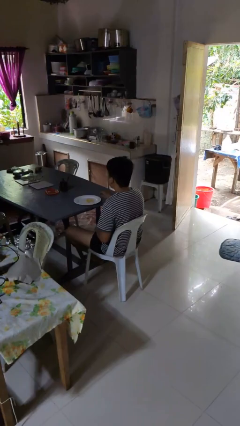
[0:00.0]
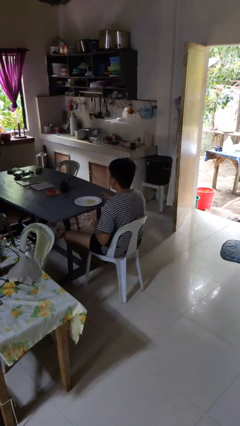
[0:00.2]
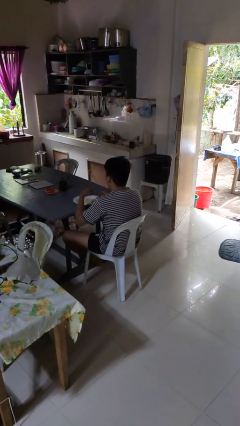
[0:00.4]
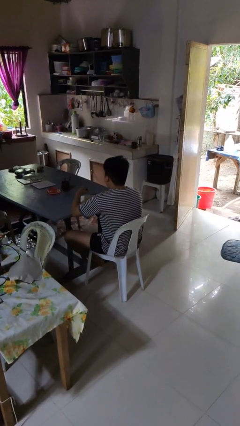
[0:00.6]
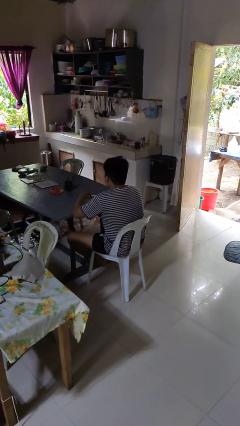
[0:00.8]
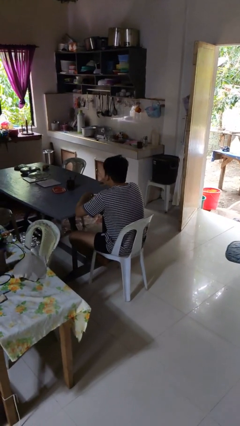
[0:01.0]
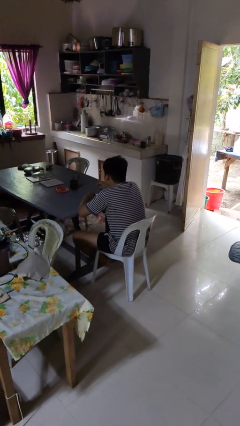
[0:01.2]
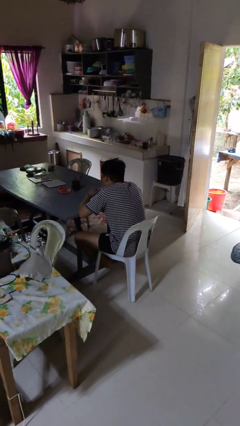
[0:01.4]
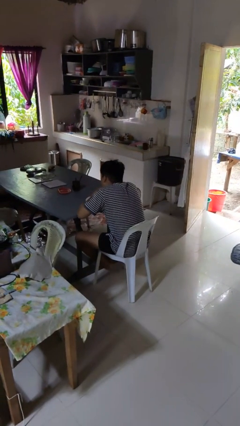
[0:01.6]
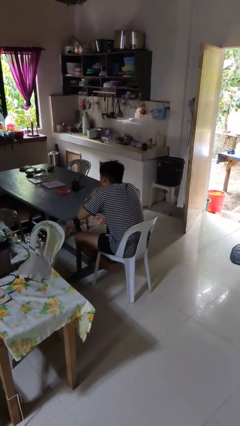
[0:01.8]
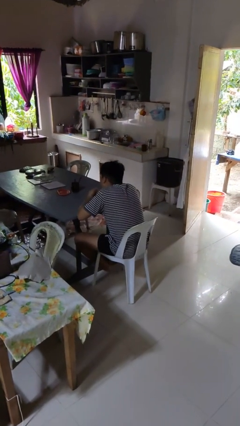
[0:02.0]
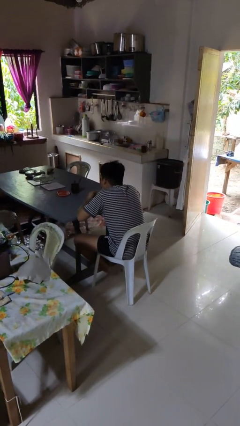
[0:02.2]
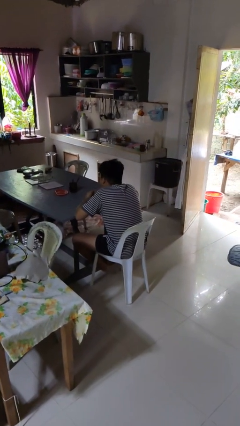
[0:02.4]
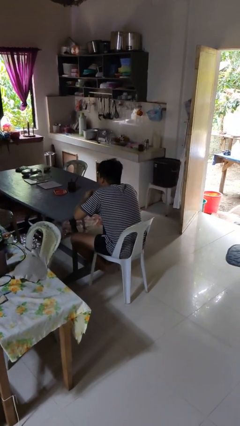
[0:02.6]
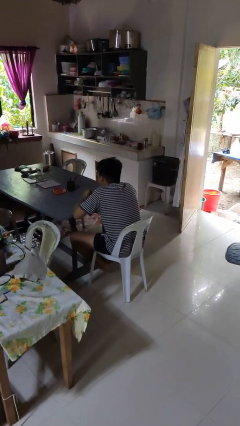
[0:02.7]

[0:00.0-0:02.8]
person eats with hands

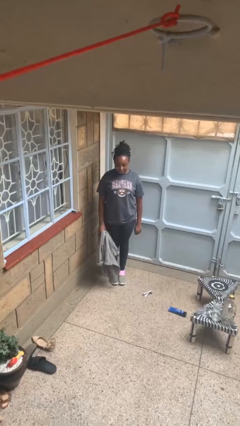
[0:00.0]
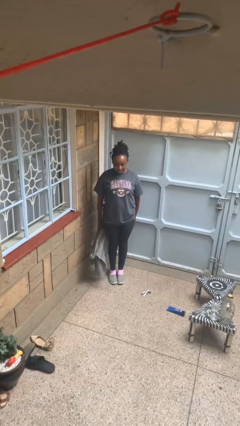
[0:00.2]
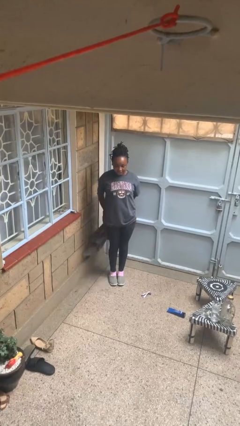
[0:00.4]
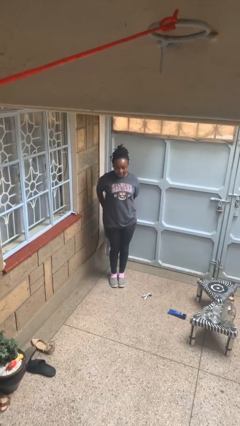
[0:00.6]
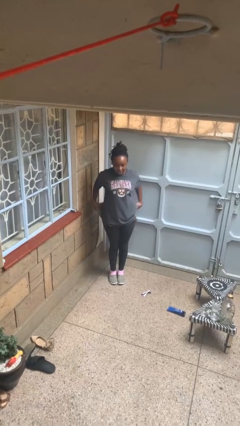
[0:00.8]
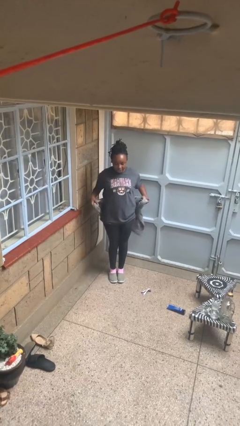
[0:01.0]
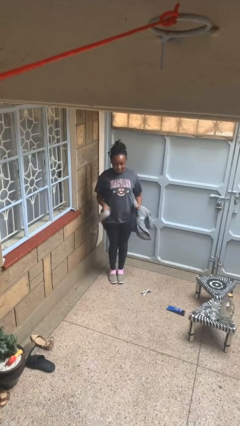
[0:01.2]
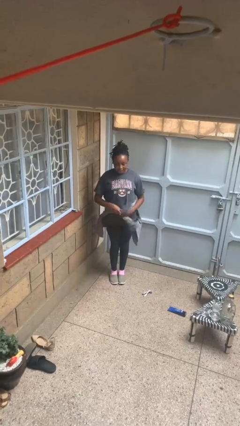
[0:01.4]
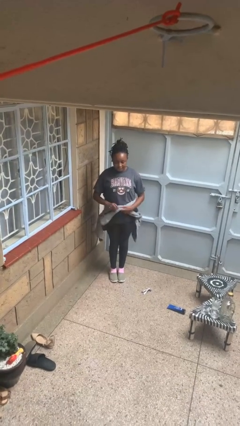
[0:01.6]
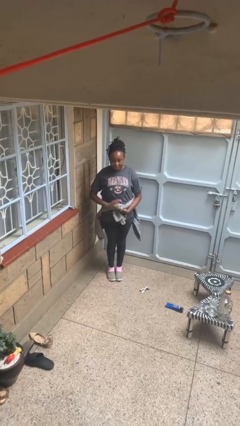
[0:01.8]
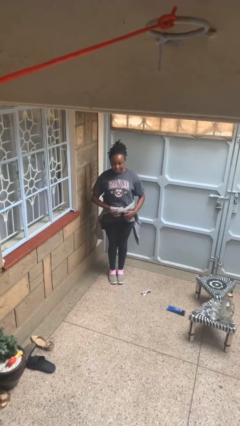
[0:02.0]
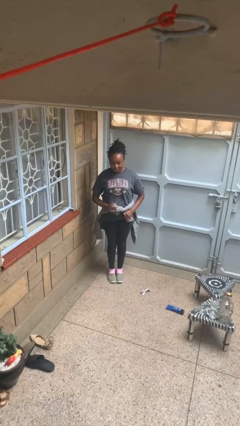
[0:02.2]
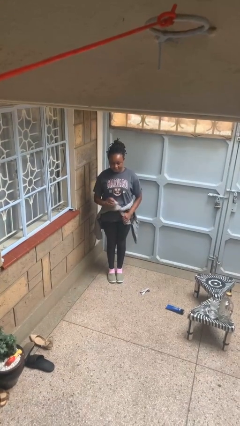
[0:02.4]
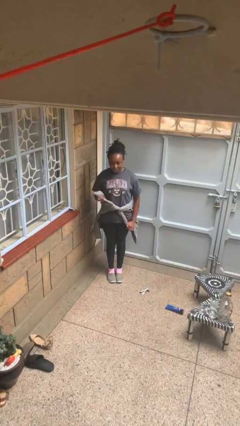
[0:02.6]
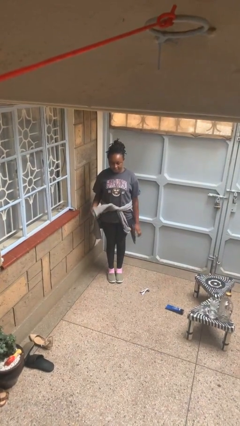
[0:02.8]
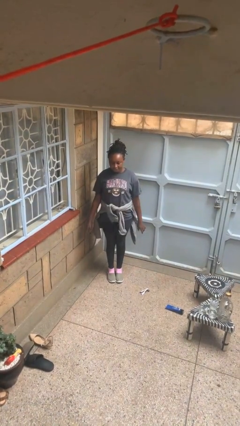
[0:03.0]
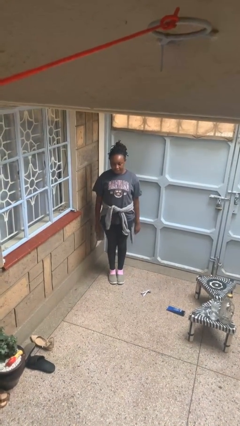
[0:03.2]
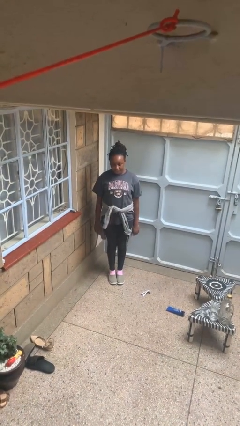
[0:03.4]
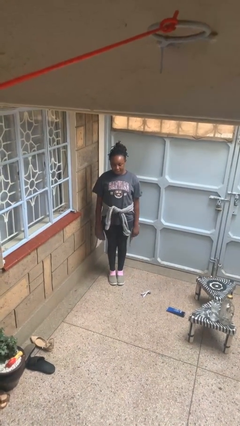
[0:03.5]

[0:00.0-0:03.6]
person ties jacket around waist

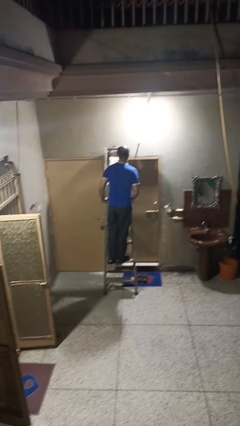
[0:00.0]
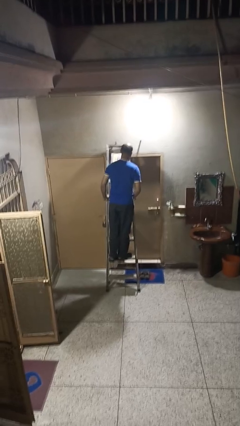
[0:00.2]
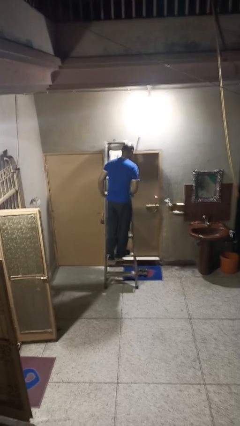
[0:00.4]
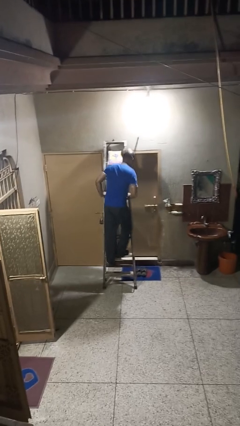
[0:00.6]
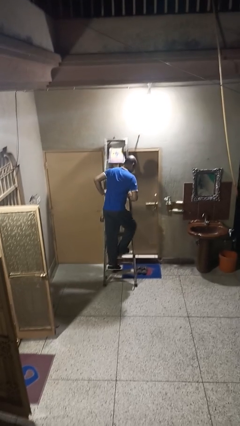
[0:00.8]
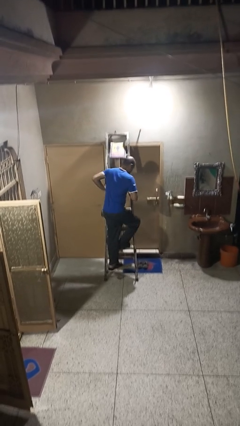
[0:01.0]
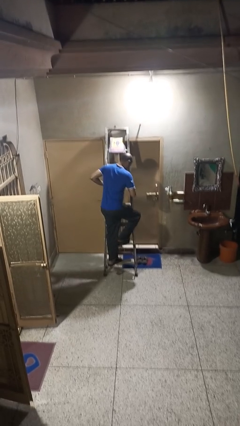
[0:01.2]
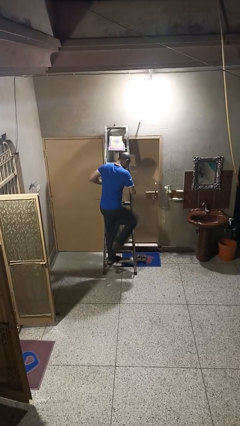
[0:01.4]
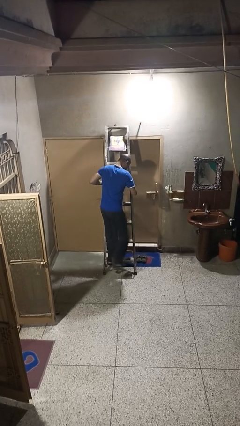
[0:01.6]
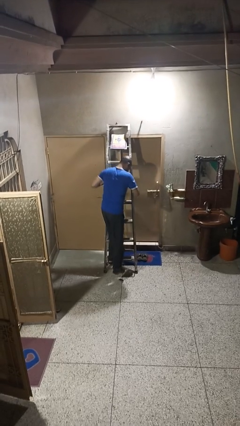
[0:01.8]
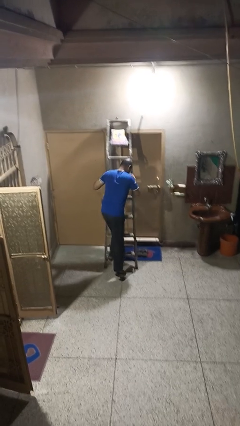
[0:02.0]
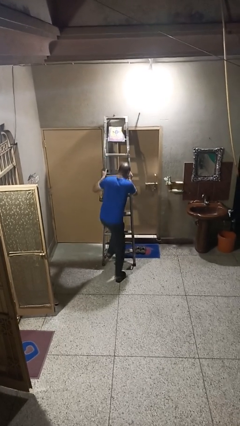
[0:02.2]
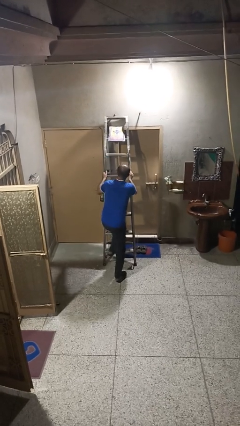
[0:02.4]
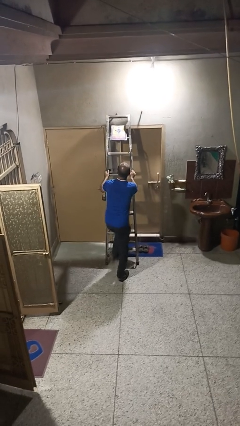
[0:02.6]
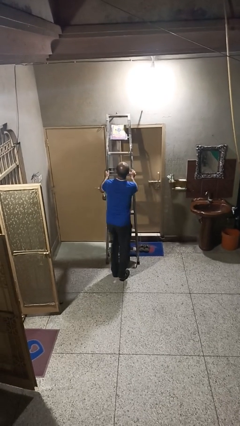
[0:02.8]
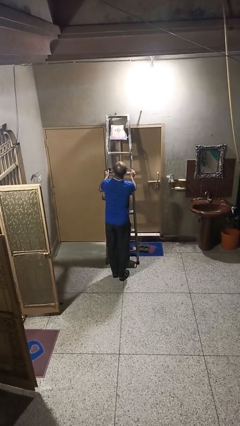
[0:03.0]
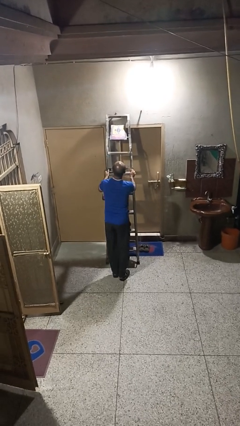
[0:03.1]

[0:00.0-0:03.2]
person climbs down ladder

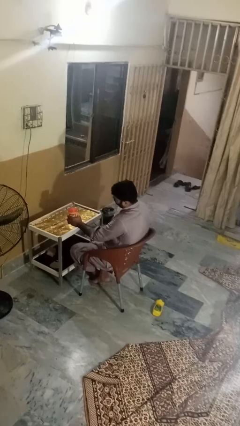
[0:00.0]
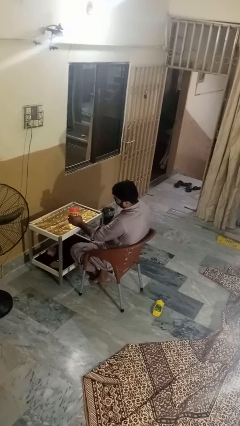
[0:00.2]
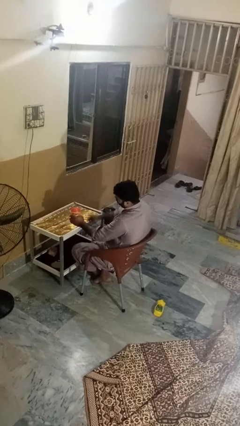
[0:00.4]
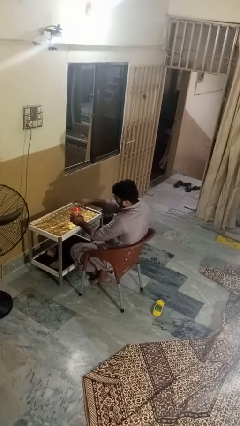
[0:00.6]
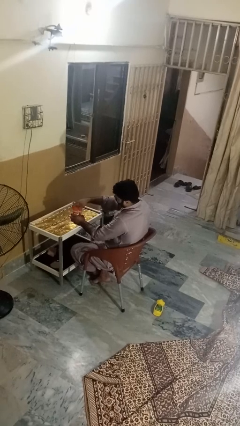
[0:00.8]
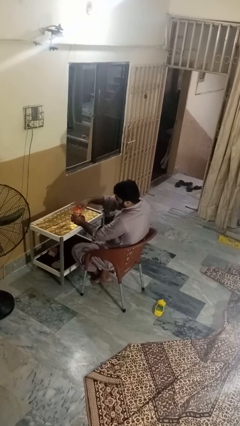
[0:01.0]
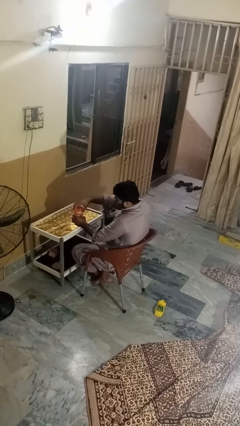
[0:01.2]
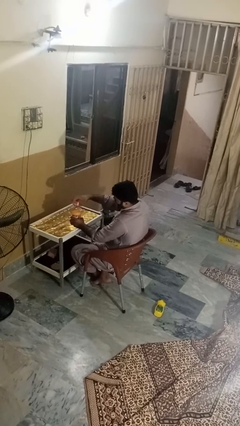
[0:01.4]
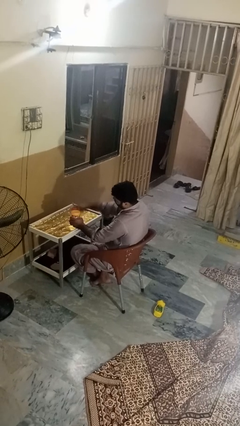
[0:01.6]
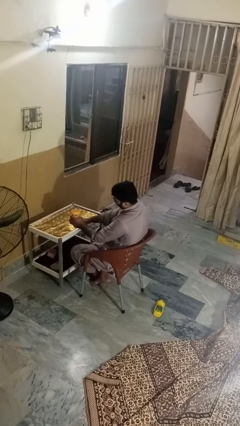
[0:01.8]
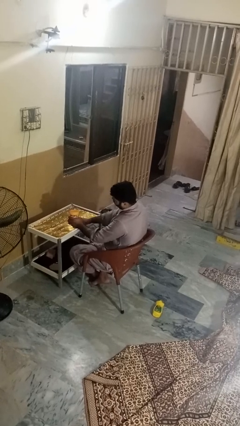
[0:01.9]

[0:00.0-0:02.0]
person opens jar

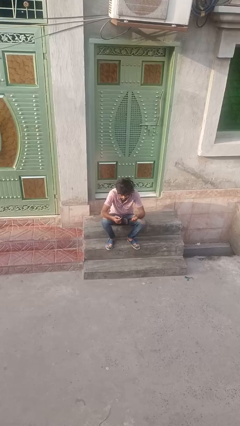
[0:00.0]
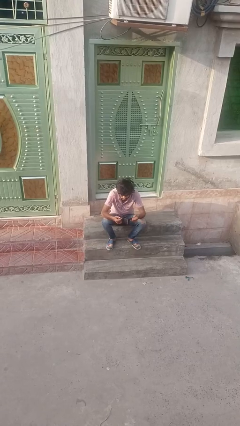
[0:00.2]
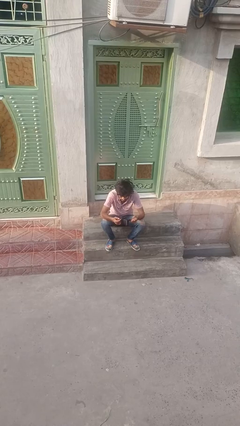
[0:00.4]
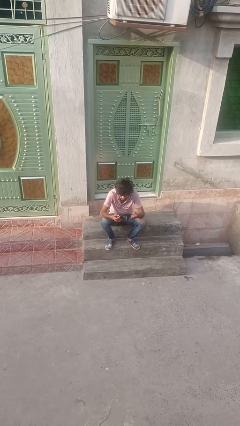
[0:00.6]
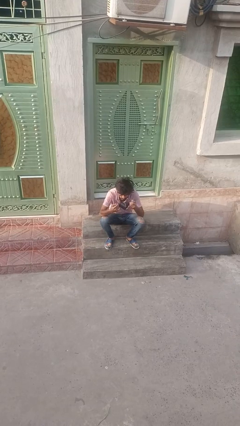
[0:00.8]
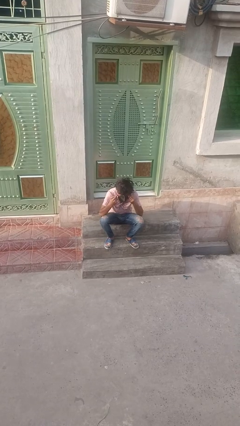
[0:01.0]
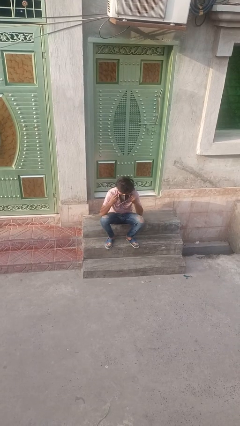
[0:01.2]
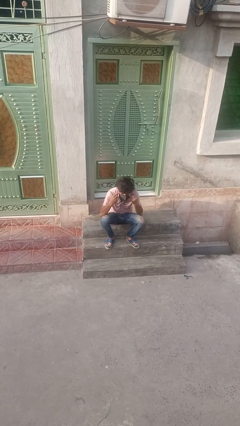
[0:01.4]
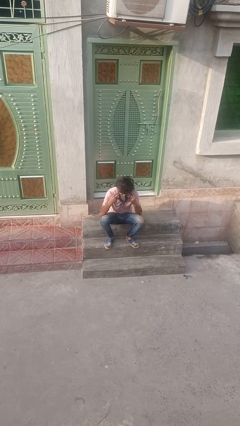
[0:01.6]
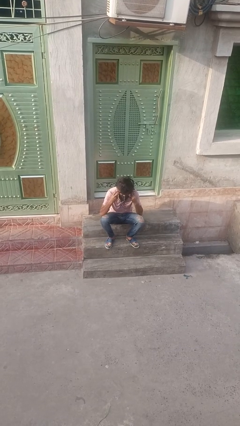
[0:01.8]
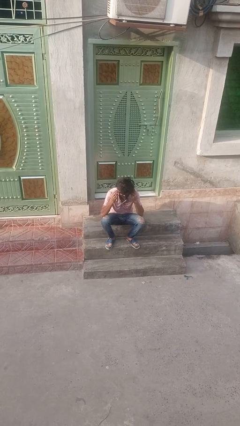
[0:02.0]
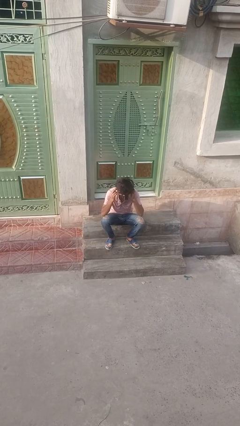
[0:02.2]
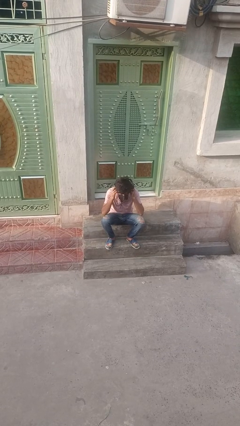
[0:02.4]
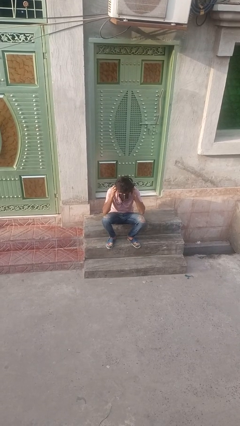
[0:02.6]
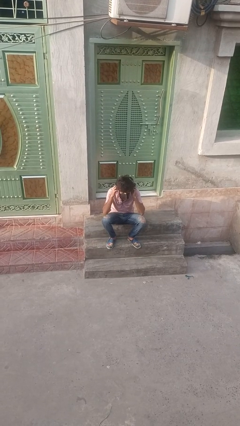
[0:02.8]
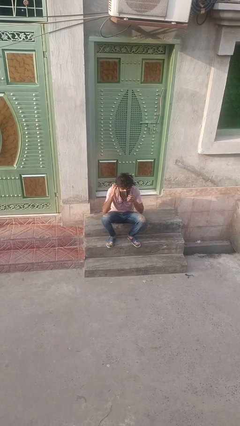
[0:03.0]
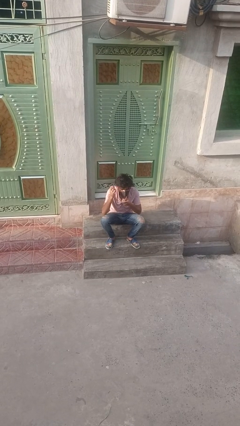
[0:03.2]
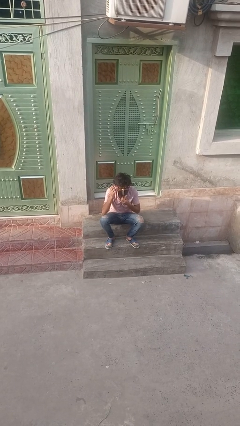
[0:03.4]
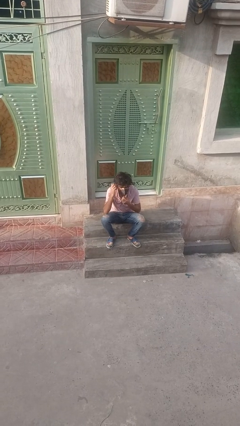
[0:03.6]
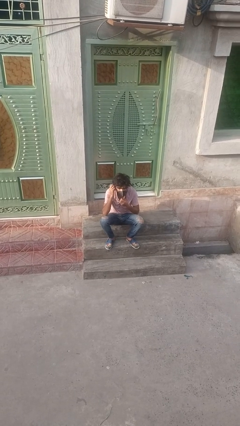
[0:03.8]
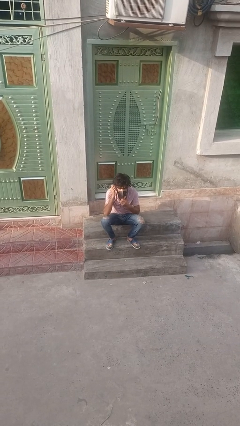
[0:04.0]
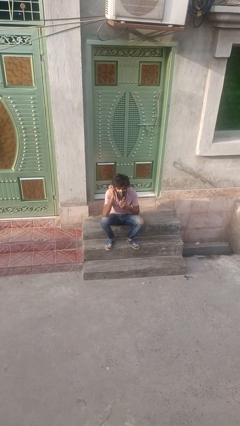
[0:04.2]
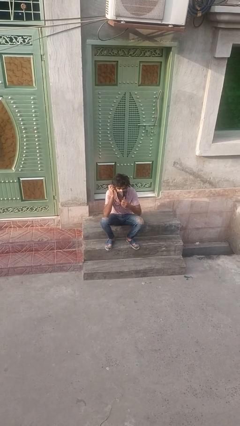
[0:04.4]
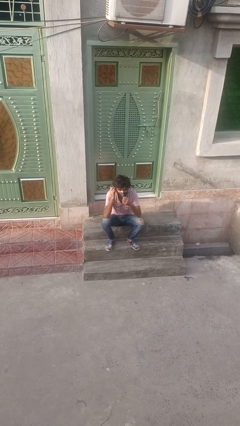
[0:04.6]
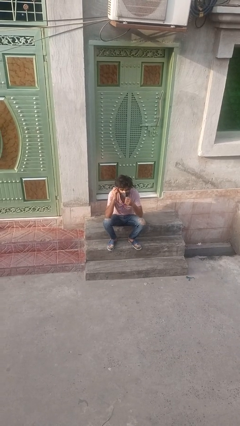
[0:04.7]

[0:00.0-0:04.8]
person puts on facemask

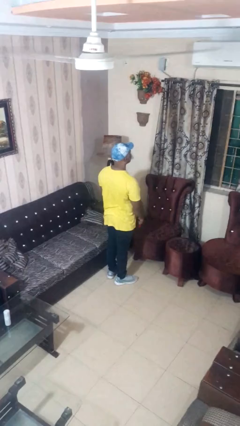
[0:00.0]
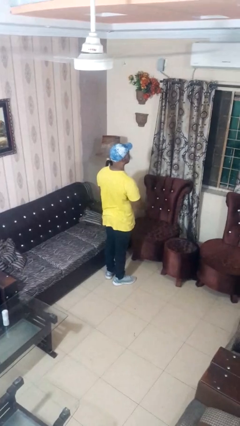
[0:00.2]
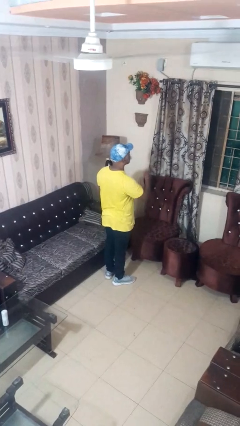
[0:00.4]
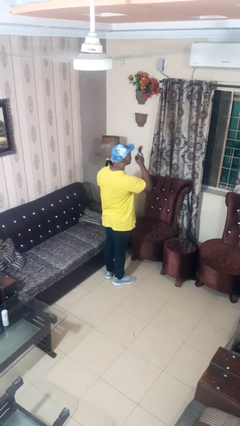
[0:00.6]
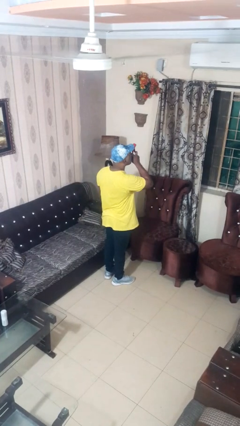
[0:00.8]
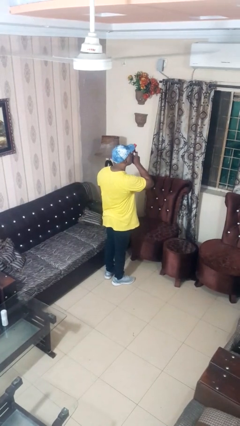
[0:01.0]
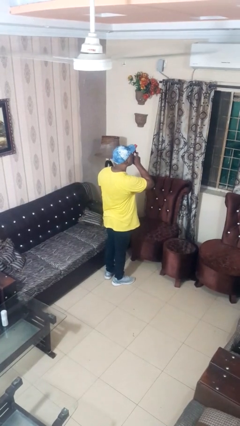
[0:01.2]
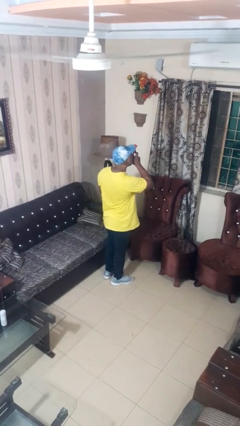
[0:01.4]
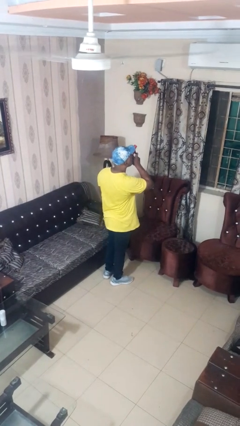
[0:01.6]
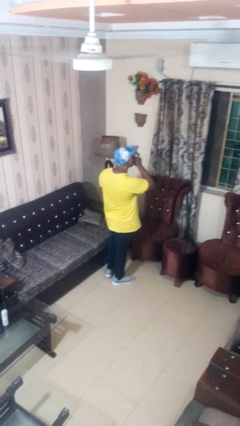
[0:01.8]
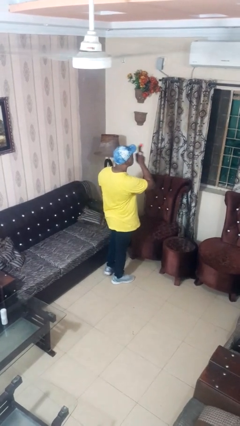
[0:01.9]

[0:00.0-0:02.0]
person vapes
